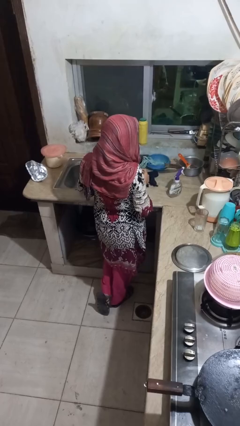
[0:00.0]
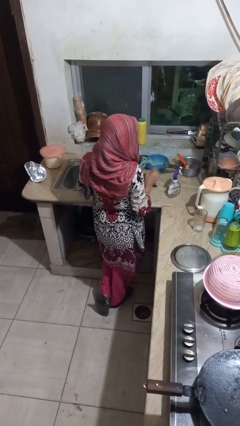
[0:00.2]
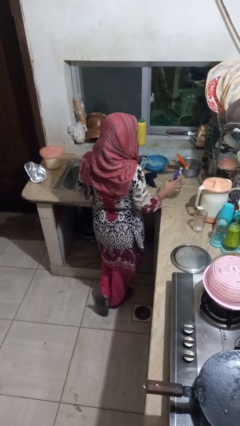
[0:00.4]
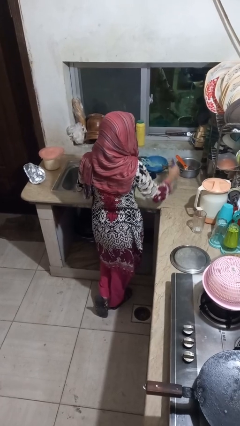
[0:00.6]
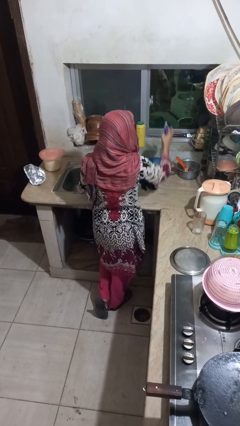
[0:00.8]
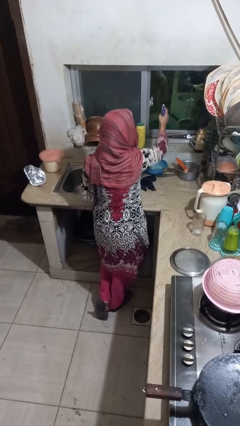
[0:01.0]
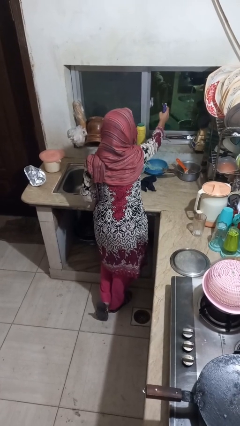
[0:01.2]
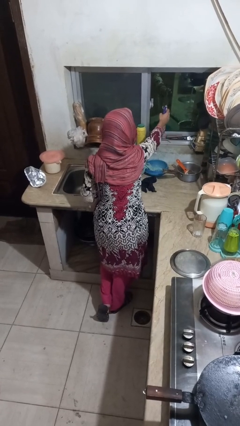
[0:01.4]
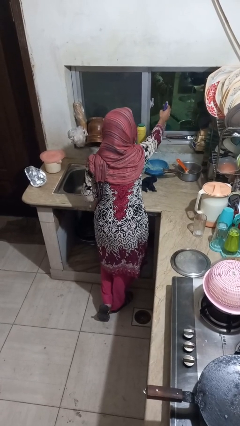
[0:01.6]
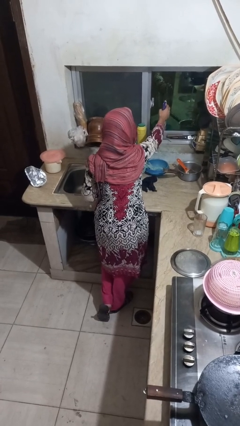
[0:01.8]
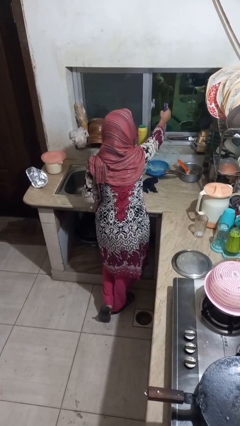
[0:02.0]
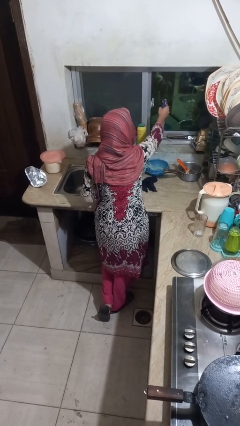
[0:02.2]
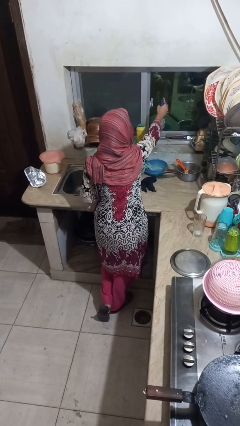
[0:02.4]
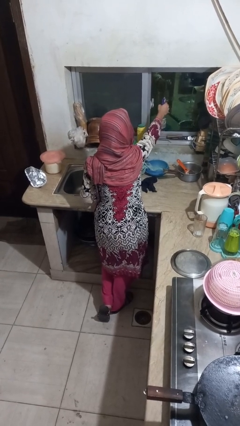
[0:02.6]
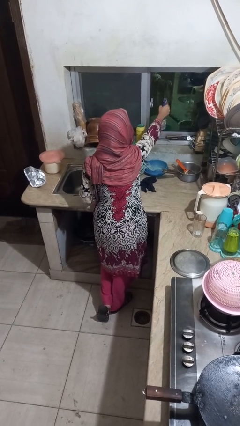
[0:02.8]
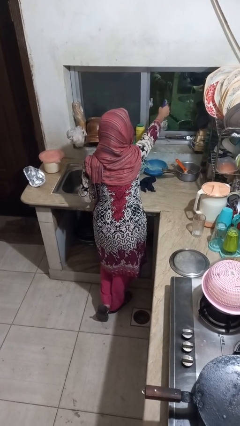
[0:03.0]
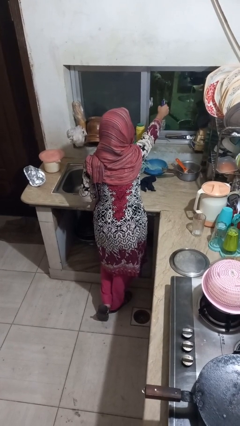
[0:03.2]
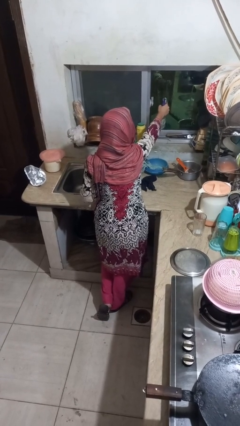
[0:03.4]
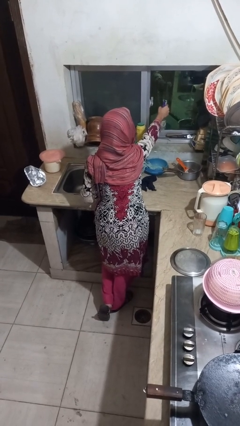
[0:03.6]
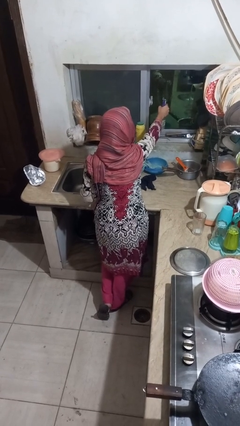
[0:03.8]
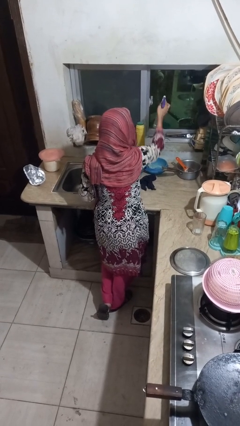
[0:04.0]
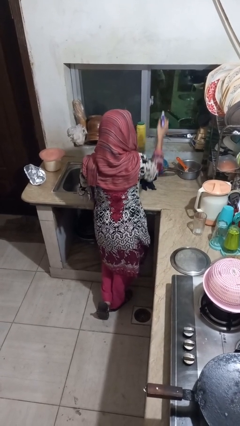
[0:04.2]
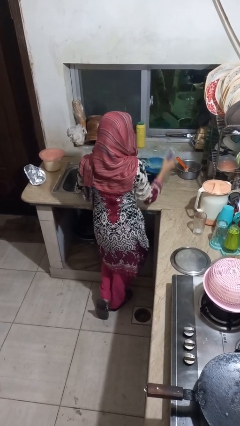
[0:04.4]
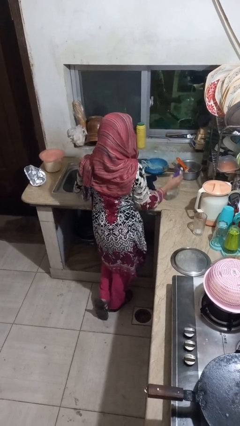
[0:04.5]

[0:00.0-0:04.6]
person sprays from bottle

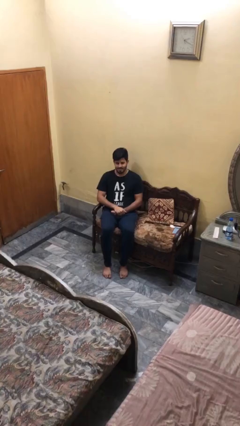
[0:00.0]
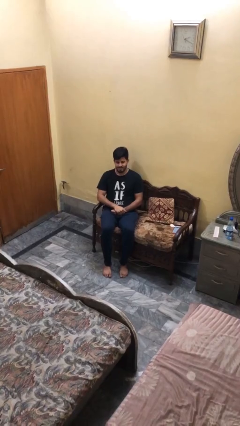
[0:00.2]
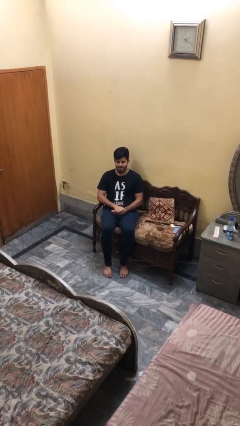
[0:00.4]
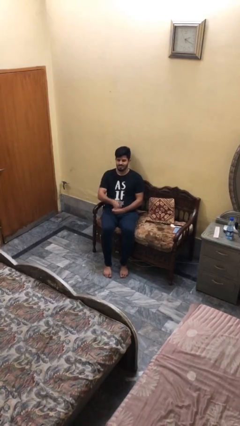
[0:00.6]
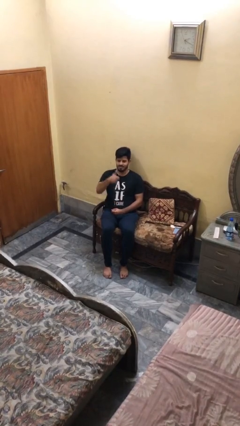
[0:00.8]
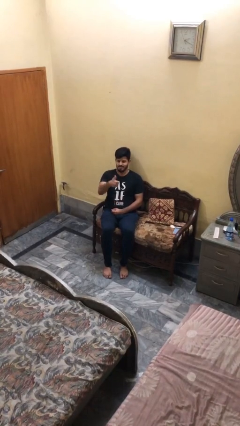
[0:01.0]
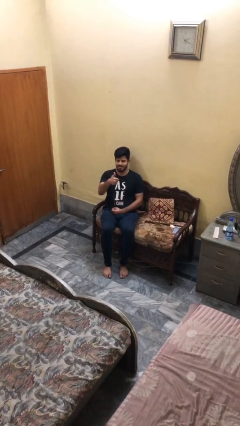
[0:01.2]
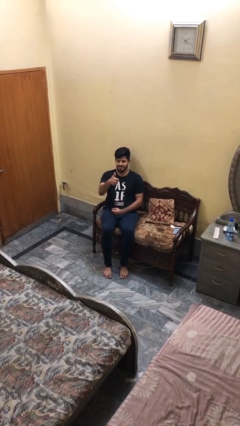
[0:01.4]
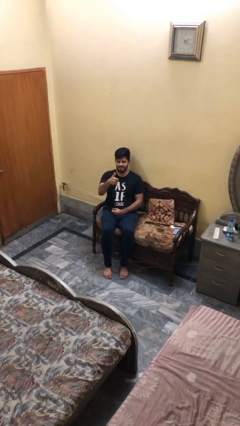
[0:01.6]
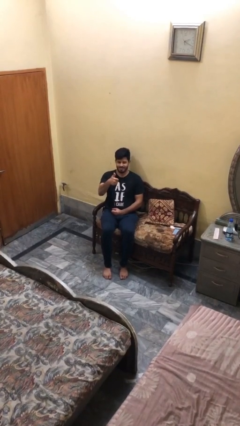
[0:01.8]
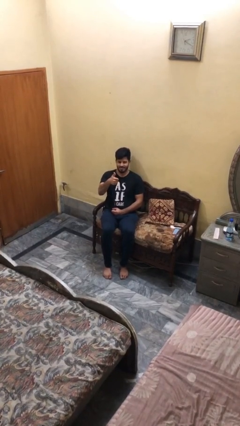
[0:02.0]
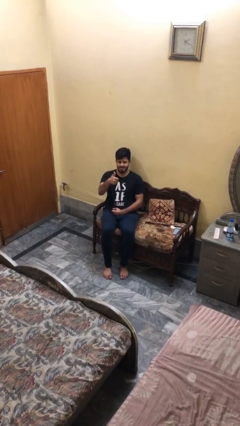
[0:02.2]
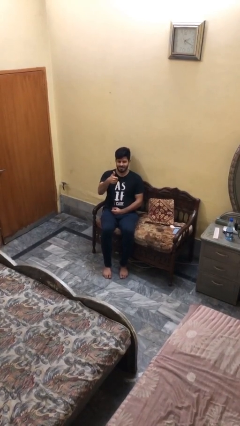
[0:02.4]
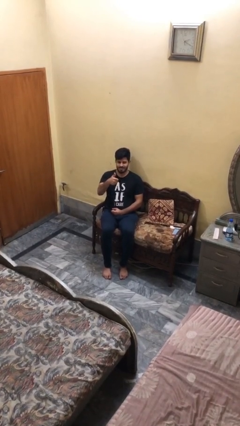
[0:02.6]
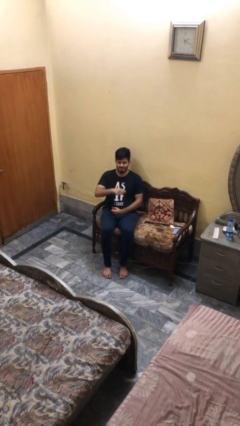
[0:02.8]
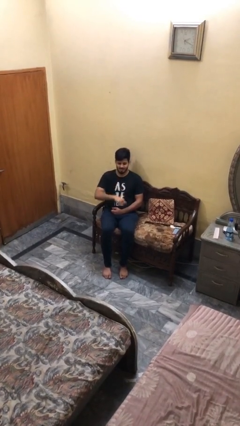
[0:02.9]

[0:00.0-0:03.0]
person gestures thumbs up

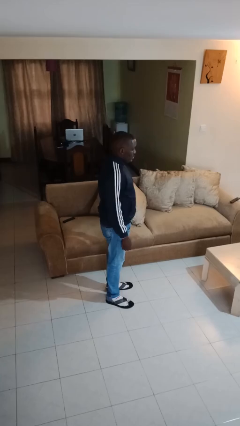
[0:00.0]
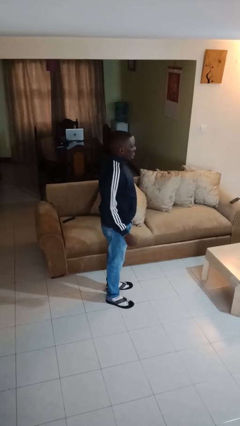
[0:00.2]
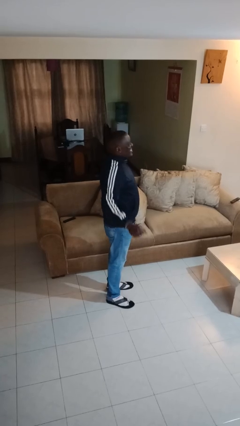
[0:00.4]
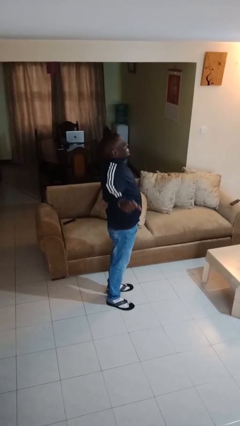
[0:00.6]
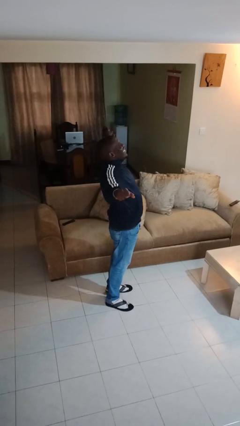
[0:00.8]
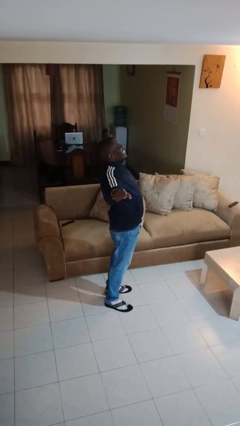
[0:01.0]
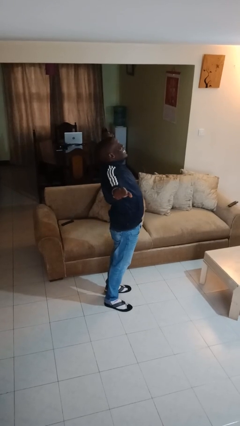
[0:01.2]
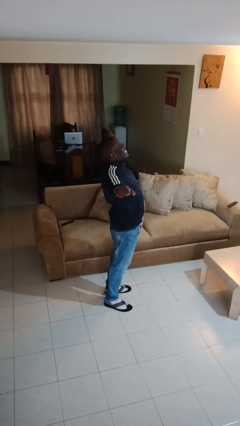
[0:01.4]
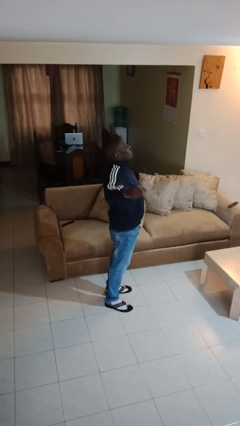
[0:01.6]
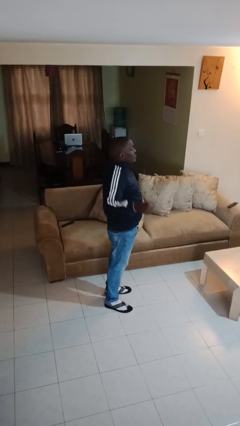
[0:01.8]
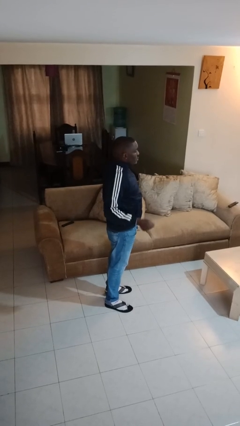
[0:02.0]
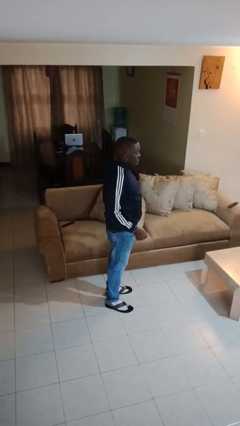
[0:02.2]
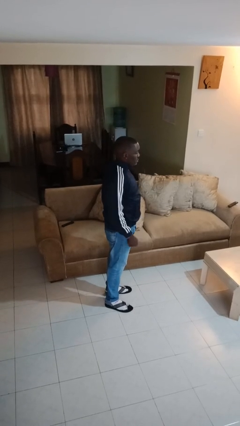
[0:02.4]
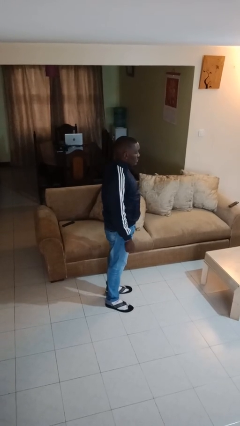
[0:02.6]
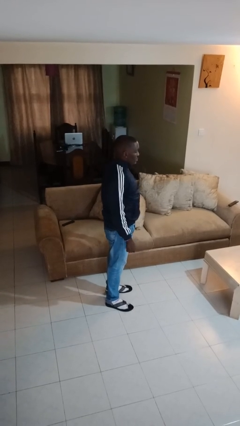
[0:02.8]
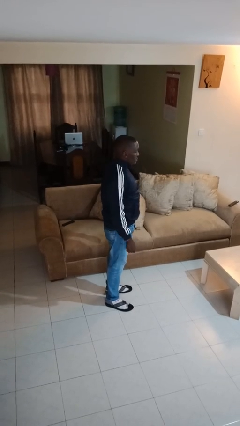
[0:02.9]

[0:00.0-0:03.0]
person stretches arms to side

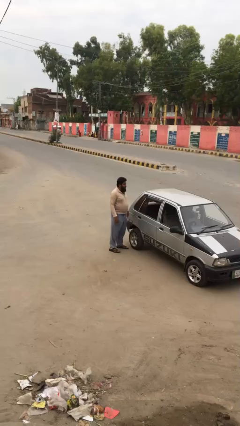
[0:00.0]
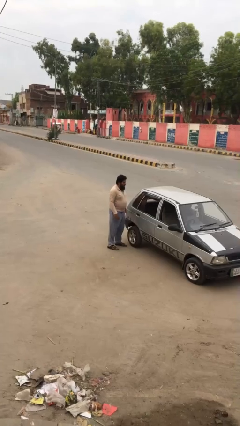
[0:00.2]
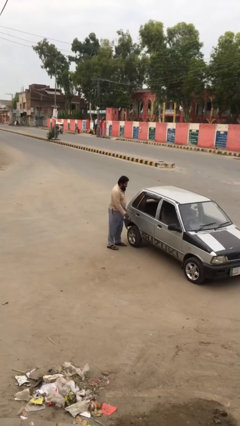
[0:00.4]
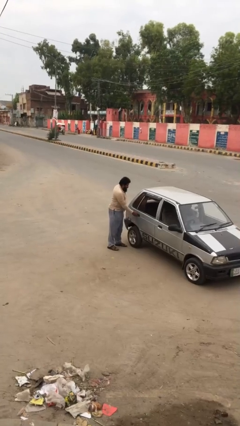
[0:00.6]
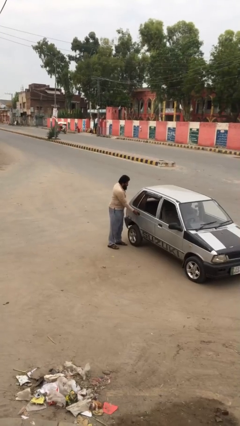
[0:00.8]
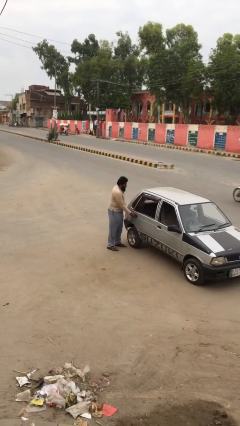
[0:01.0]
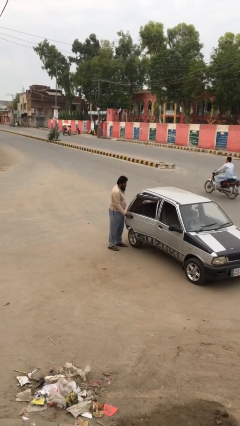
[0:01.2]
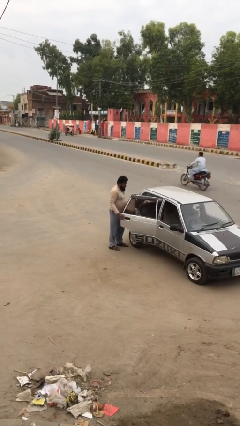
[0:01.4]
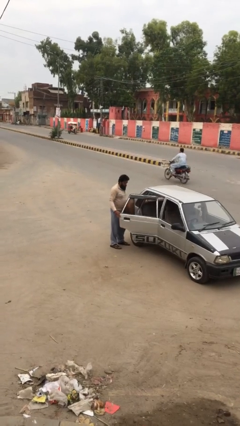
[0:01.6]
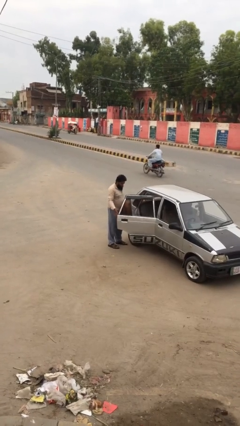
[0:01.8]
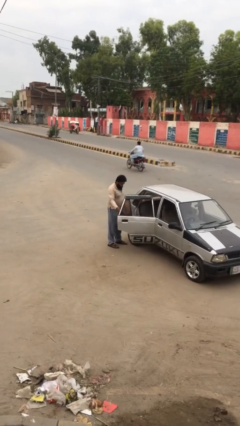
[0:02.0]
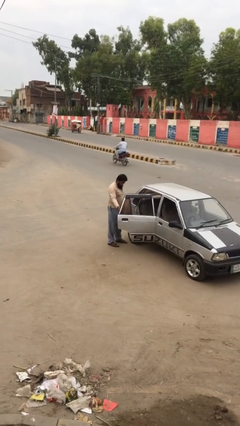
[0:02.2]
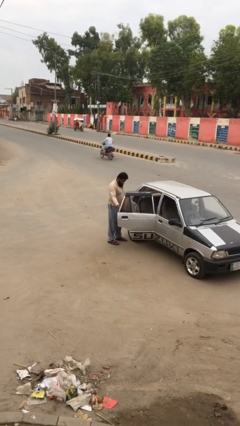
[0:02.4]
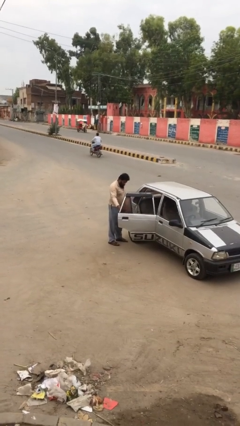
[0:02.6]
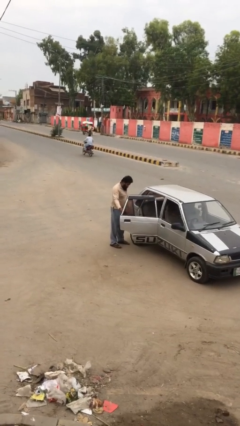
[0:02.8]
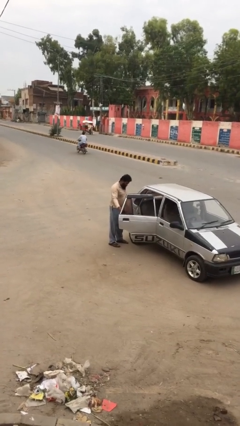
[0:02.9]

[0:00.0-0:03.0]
person opens car door

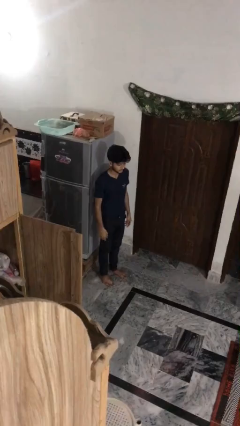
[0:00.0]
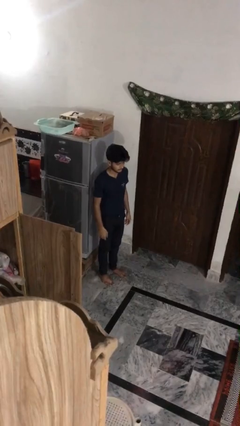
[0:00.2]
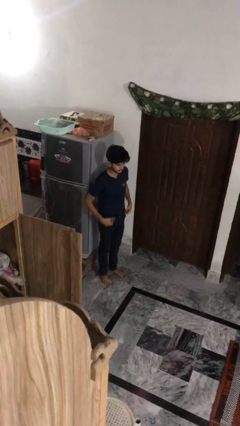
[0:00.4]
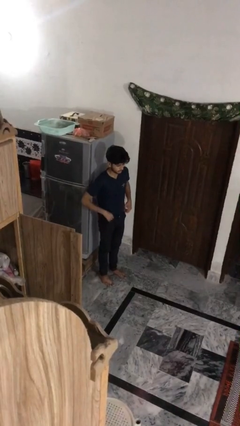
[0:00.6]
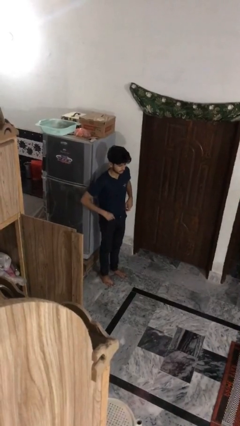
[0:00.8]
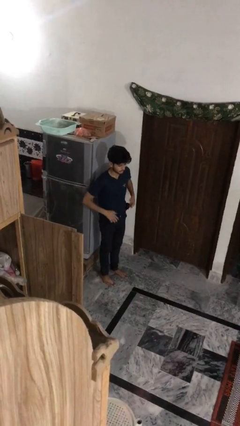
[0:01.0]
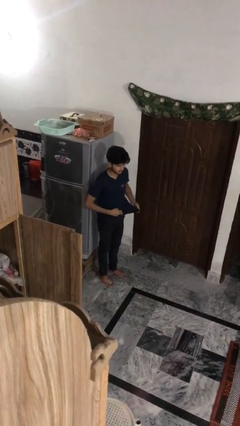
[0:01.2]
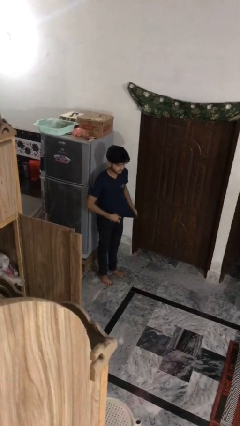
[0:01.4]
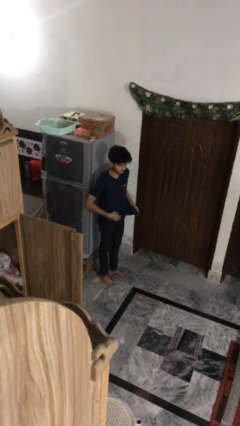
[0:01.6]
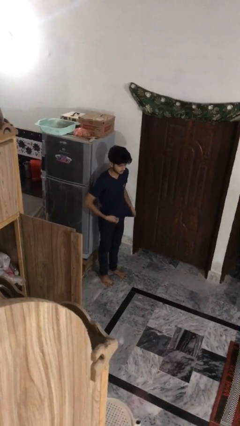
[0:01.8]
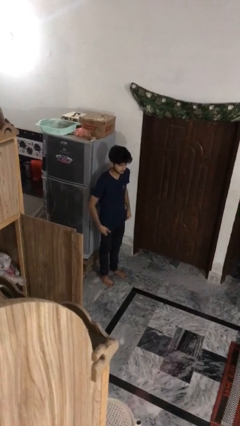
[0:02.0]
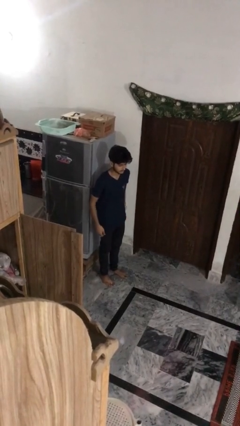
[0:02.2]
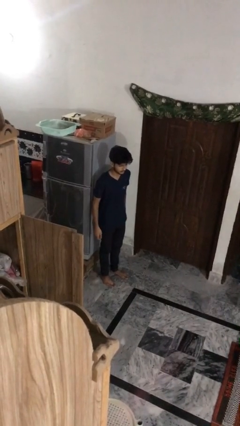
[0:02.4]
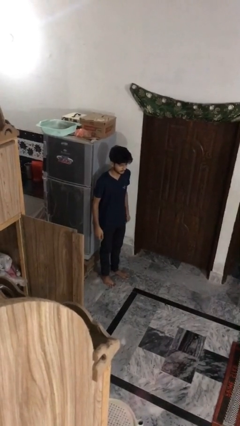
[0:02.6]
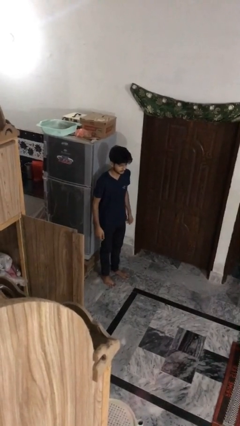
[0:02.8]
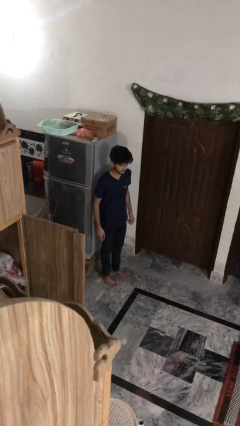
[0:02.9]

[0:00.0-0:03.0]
person untucks shirt

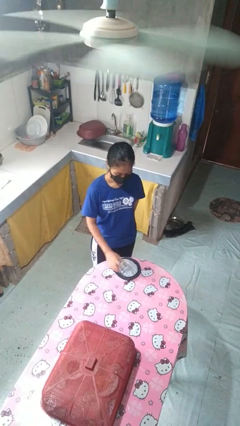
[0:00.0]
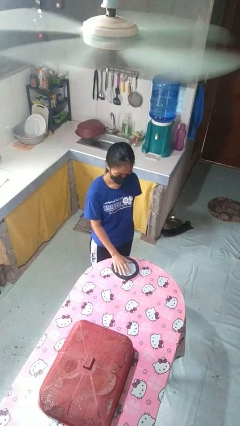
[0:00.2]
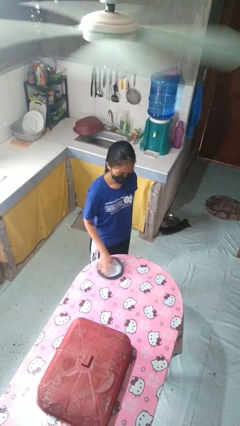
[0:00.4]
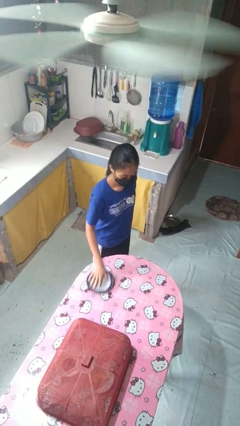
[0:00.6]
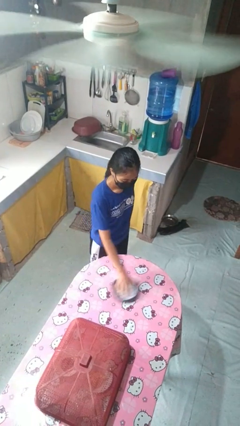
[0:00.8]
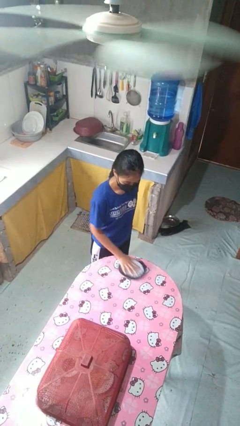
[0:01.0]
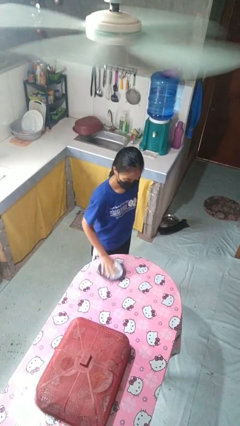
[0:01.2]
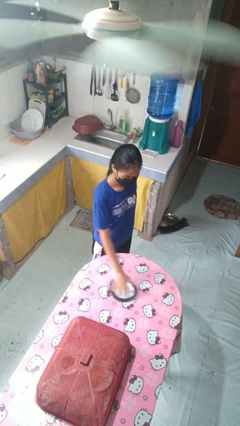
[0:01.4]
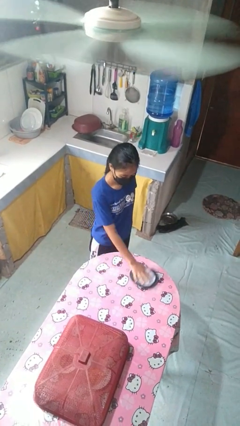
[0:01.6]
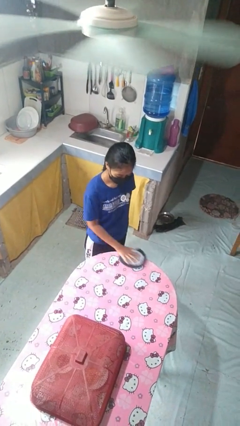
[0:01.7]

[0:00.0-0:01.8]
person cleans table with rag
